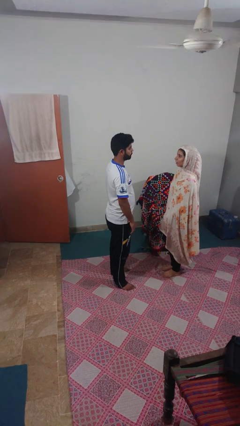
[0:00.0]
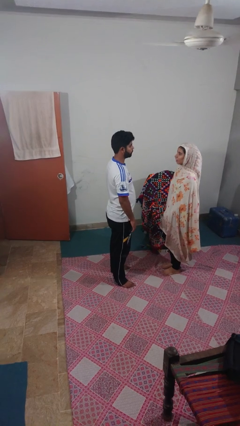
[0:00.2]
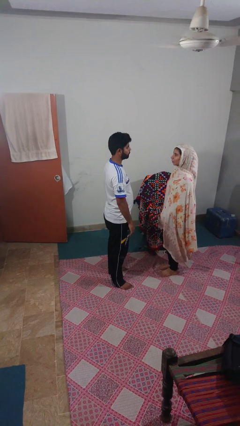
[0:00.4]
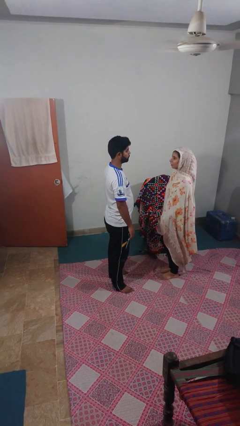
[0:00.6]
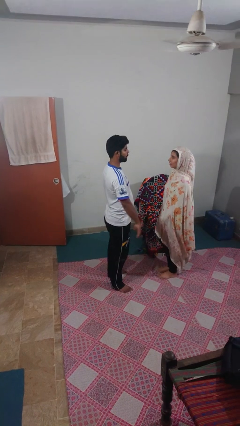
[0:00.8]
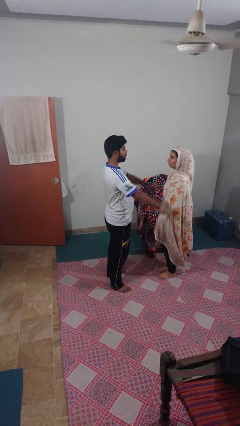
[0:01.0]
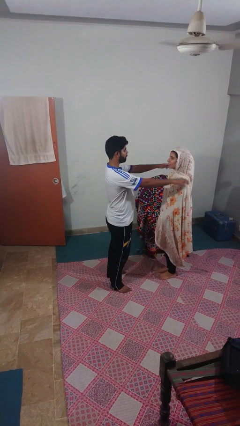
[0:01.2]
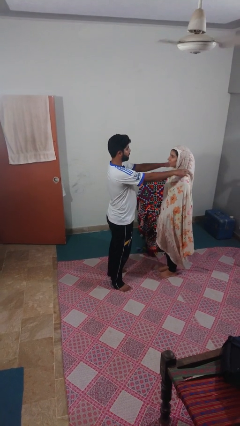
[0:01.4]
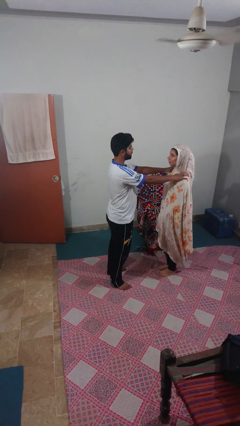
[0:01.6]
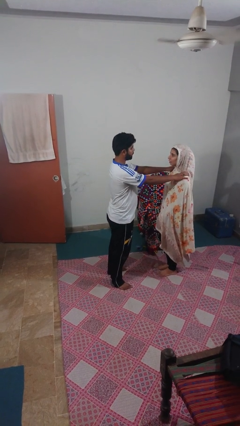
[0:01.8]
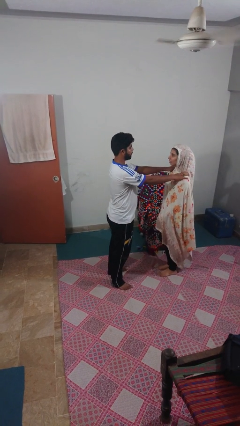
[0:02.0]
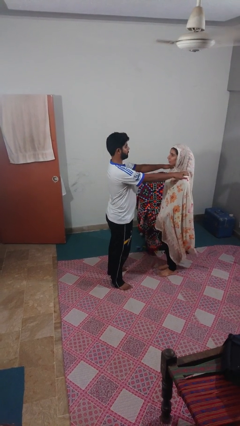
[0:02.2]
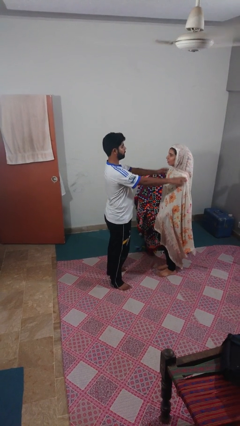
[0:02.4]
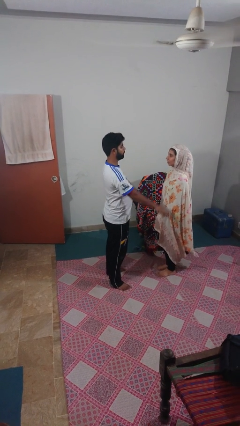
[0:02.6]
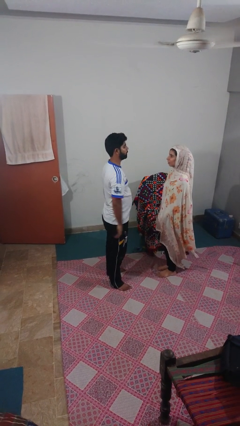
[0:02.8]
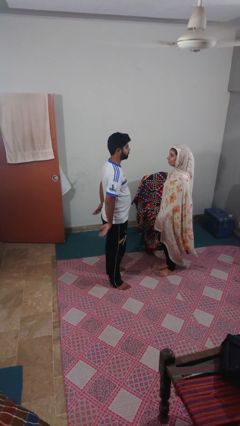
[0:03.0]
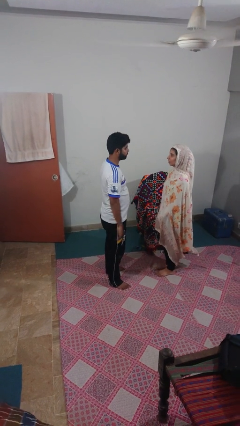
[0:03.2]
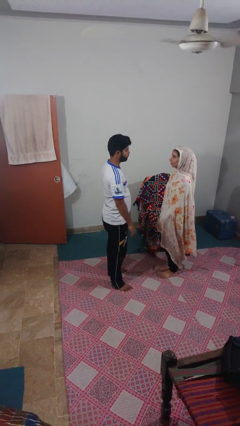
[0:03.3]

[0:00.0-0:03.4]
person pounds shoulders of person

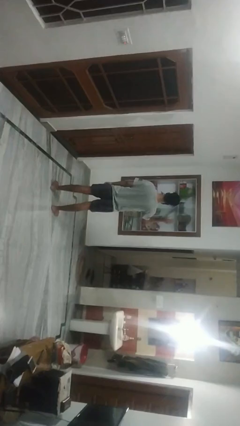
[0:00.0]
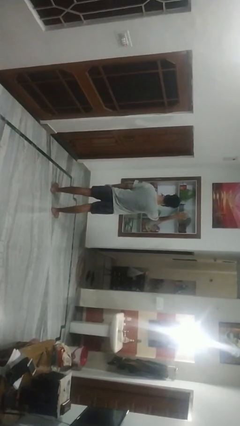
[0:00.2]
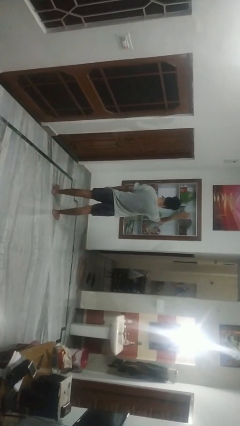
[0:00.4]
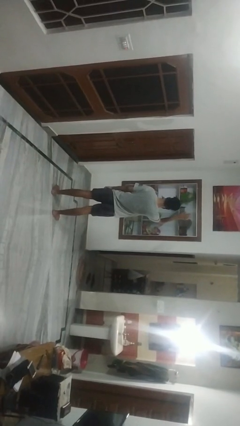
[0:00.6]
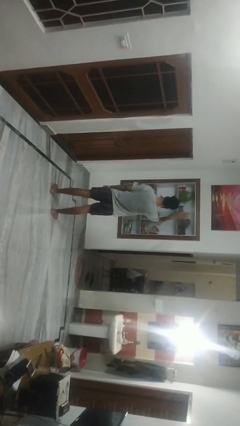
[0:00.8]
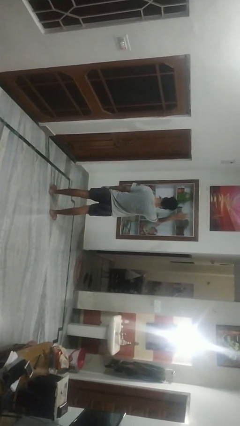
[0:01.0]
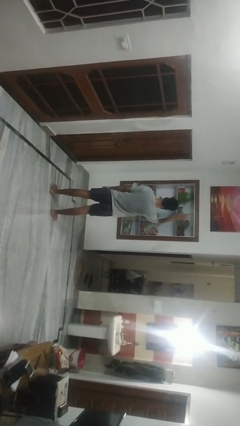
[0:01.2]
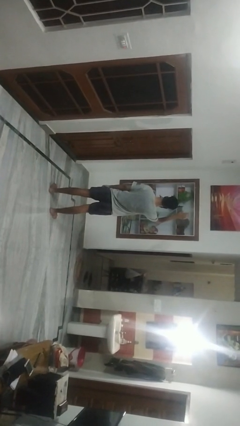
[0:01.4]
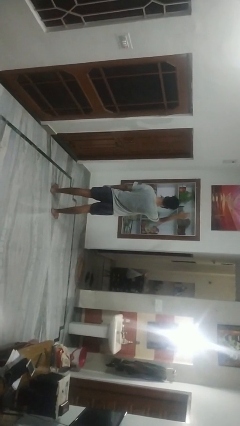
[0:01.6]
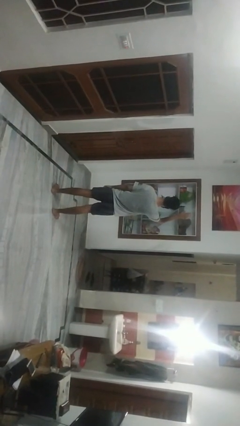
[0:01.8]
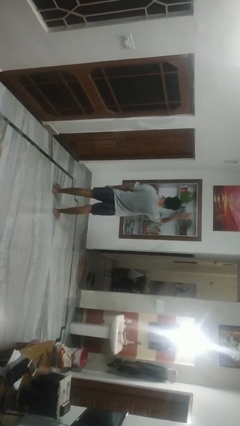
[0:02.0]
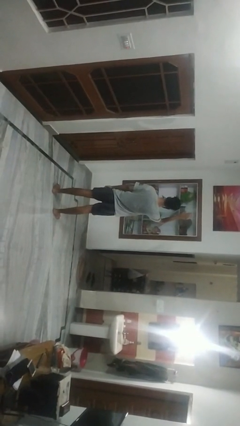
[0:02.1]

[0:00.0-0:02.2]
person gestures raise hand

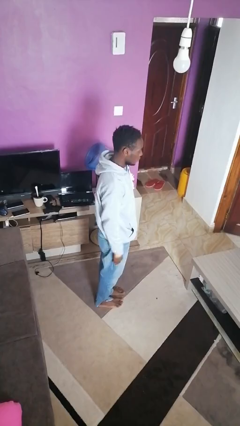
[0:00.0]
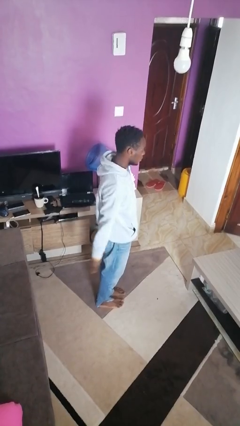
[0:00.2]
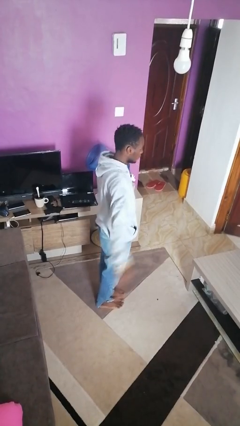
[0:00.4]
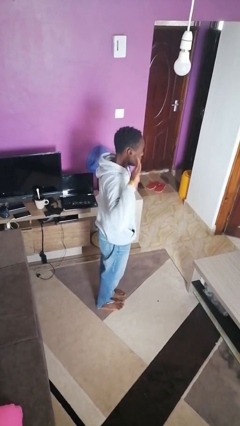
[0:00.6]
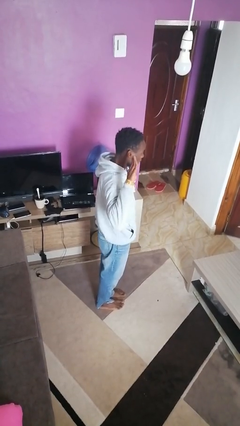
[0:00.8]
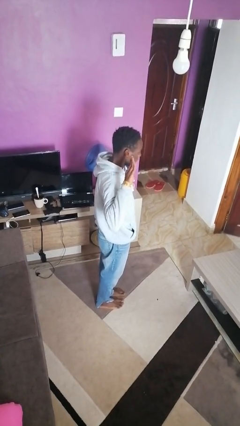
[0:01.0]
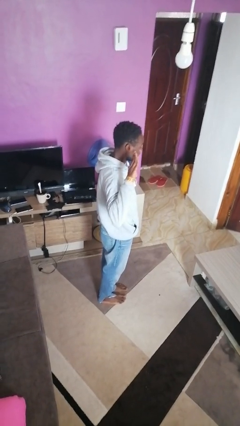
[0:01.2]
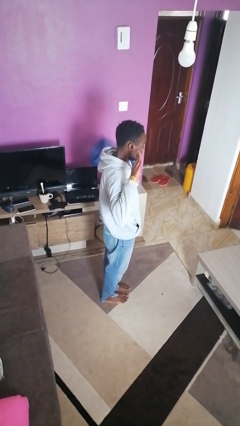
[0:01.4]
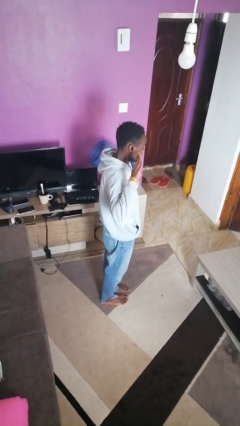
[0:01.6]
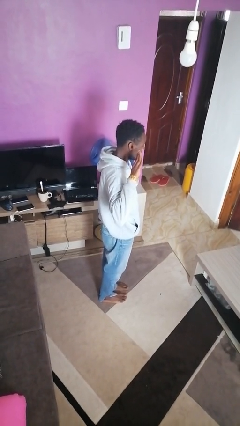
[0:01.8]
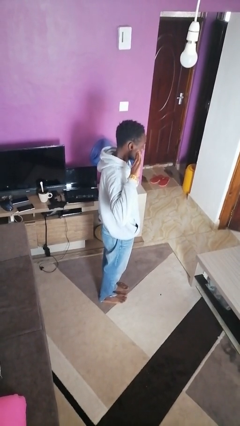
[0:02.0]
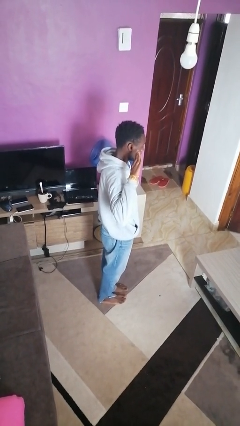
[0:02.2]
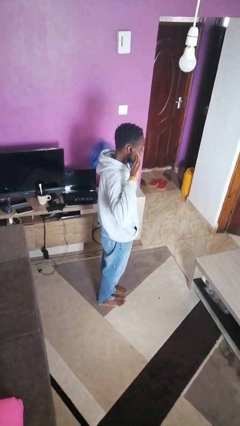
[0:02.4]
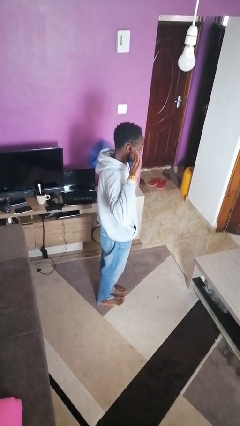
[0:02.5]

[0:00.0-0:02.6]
person salutes

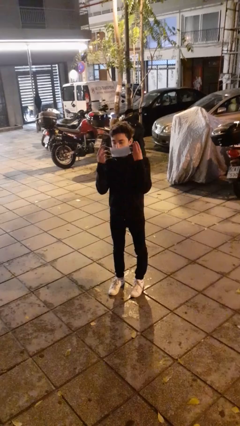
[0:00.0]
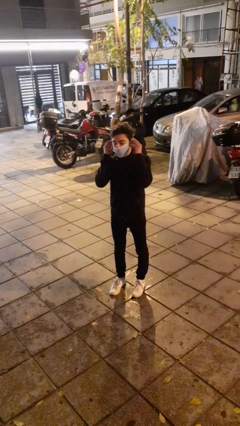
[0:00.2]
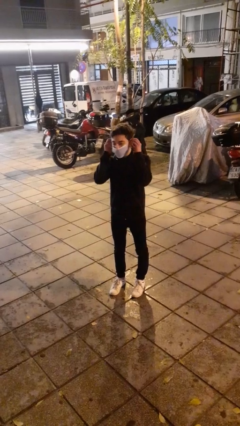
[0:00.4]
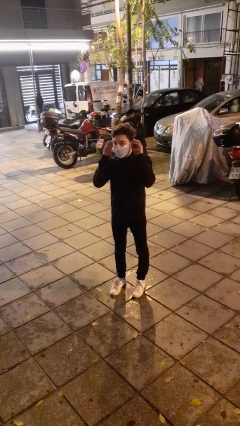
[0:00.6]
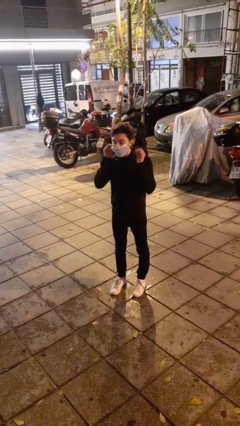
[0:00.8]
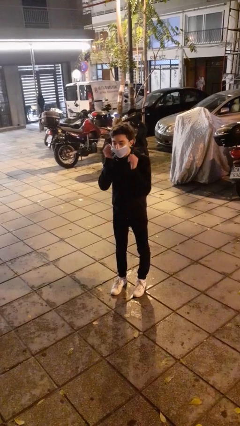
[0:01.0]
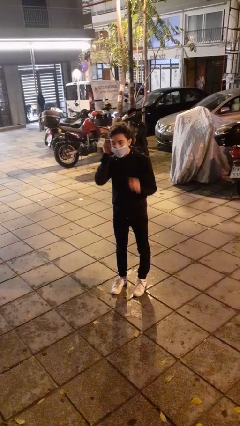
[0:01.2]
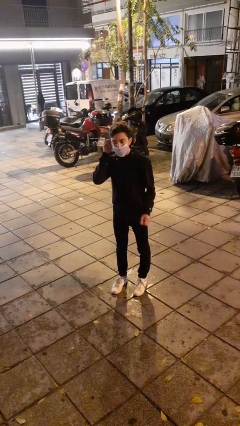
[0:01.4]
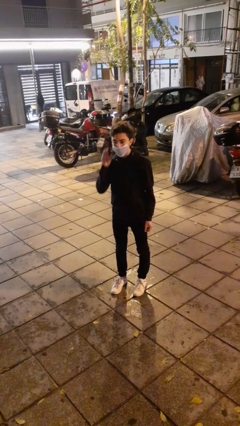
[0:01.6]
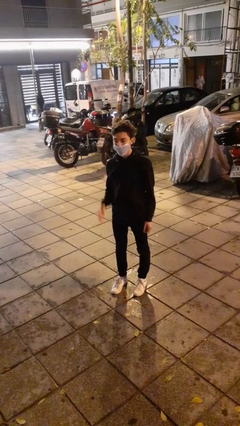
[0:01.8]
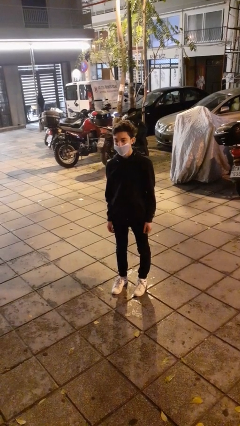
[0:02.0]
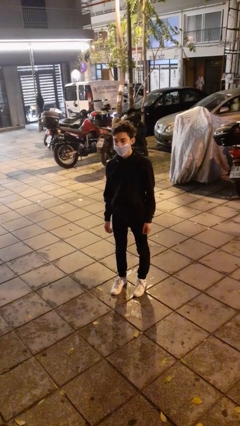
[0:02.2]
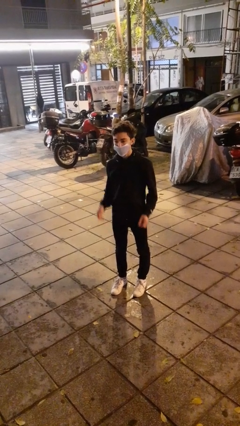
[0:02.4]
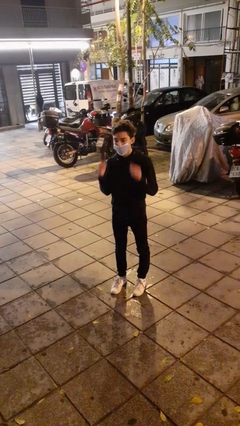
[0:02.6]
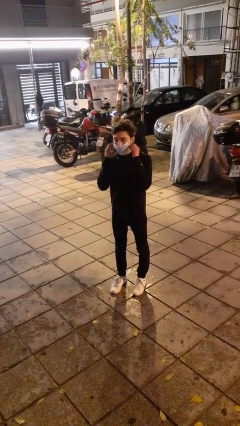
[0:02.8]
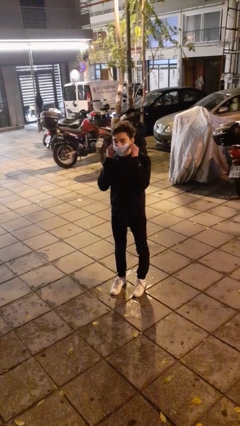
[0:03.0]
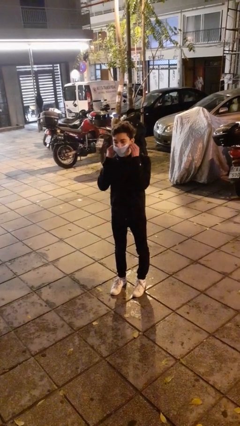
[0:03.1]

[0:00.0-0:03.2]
person puts on facemask

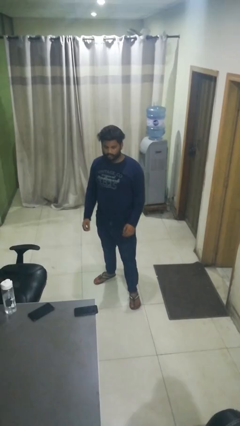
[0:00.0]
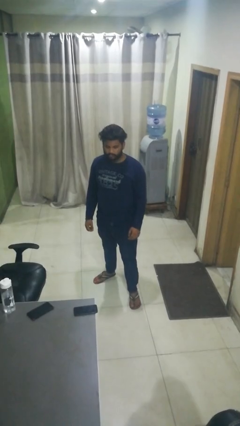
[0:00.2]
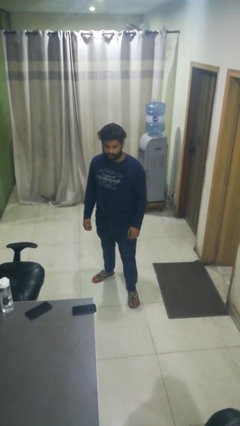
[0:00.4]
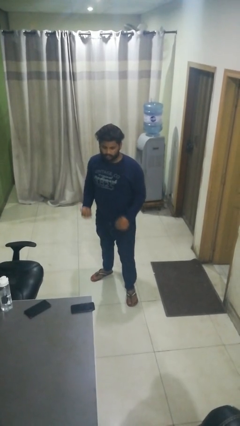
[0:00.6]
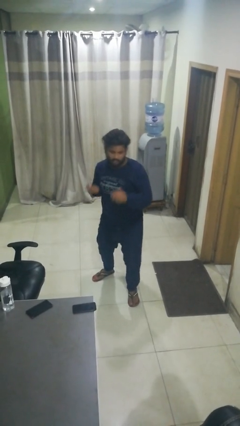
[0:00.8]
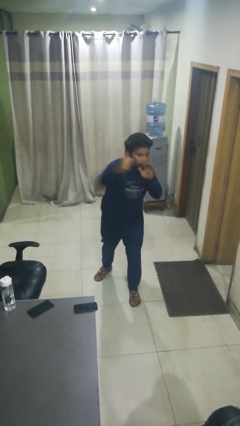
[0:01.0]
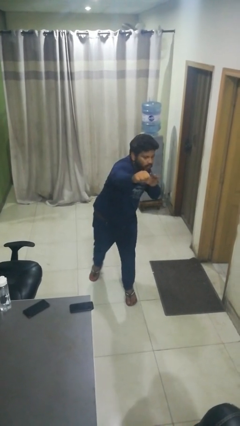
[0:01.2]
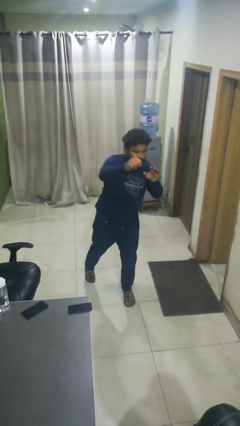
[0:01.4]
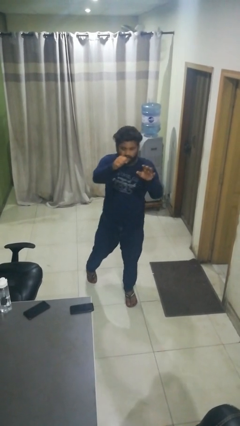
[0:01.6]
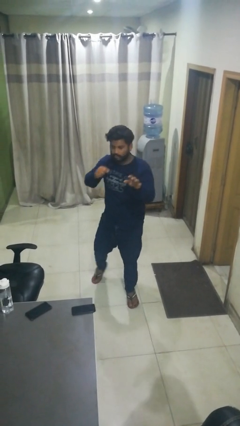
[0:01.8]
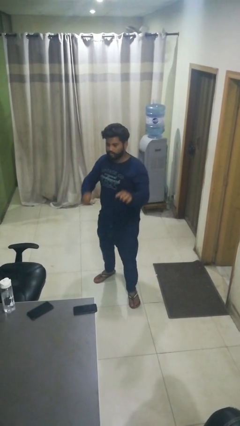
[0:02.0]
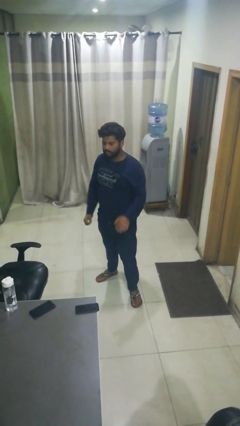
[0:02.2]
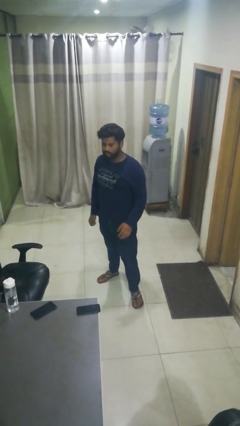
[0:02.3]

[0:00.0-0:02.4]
person punches

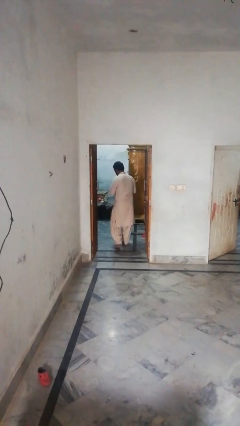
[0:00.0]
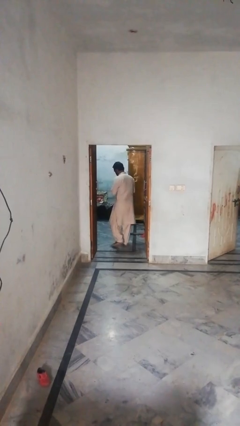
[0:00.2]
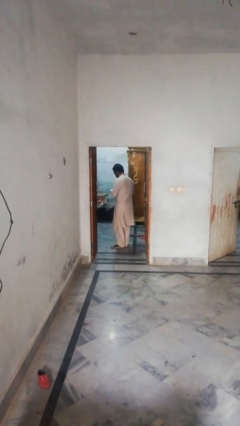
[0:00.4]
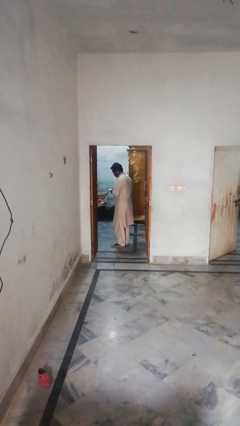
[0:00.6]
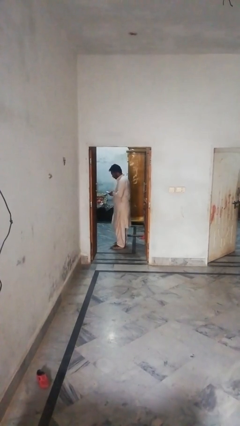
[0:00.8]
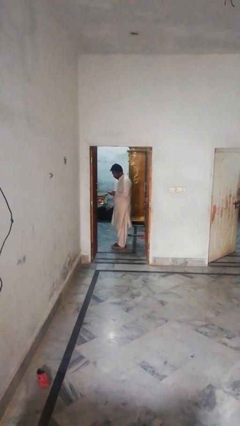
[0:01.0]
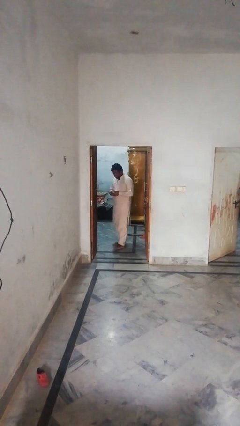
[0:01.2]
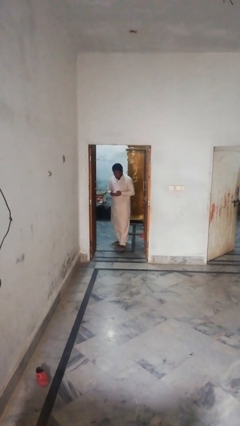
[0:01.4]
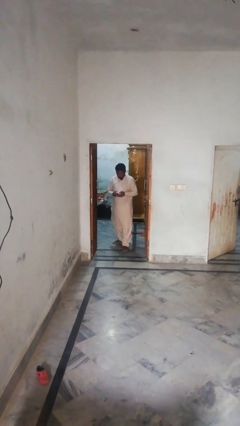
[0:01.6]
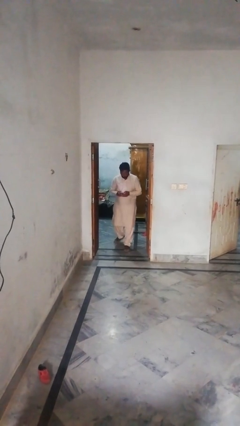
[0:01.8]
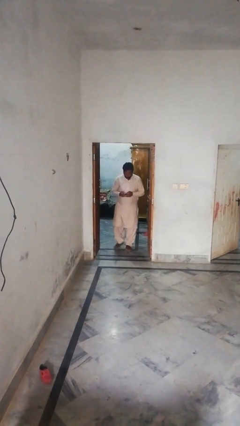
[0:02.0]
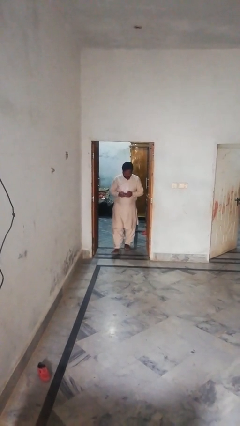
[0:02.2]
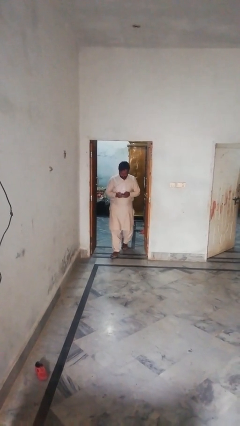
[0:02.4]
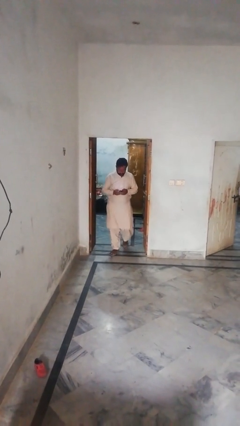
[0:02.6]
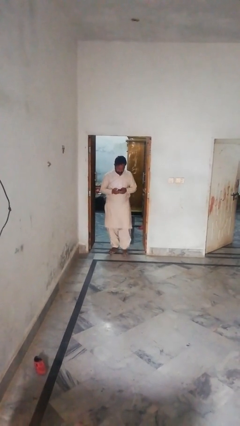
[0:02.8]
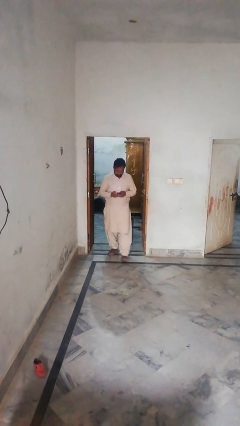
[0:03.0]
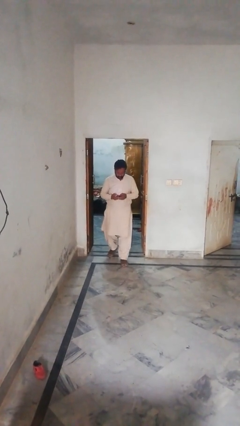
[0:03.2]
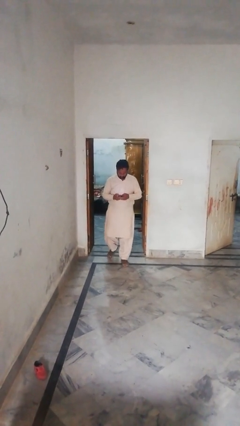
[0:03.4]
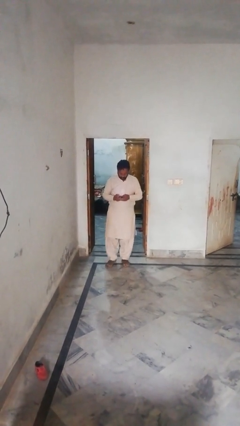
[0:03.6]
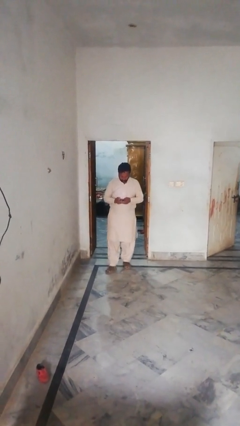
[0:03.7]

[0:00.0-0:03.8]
person exits scene through structure
